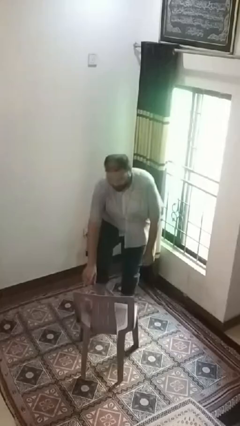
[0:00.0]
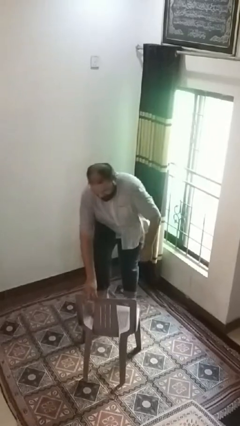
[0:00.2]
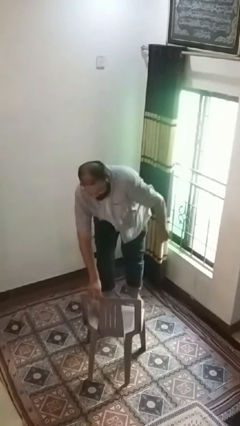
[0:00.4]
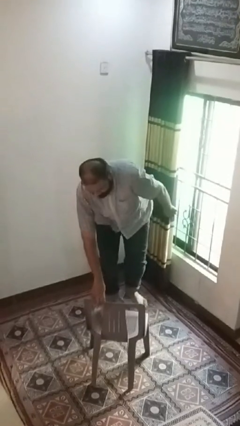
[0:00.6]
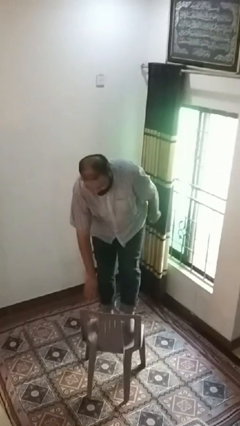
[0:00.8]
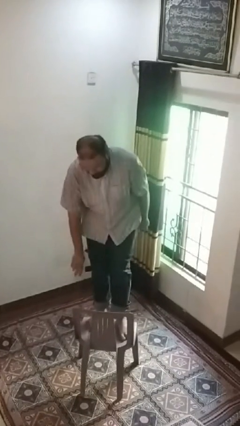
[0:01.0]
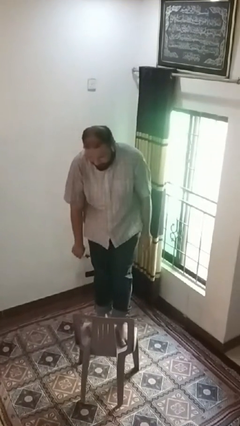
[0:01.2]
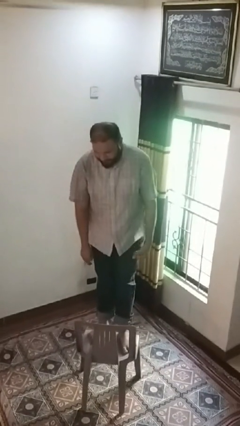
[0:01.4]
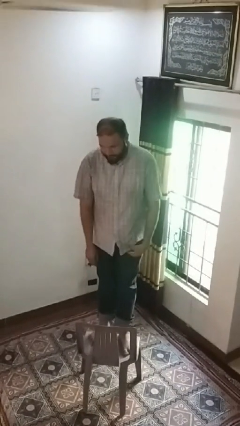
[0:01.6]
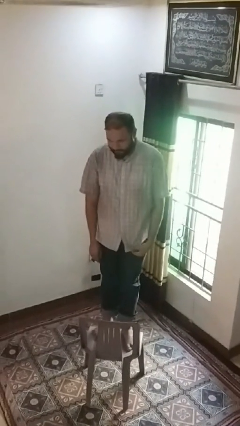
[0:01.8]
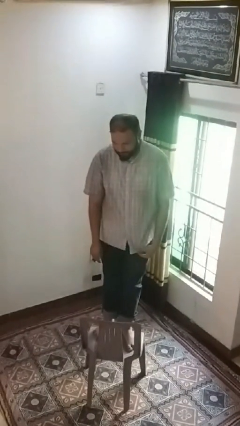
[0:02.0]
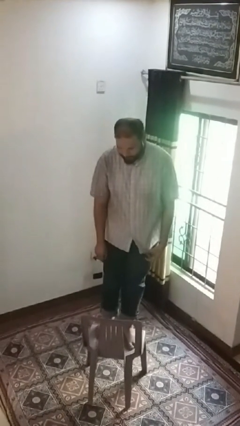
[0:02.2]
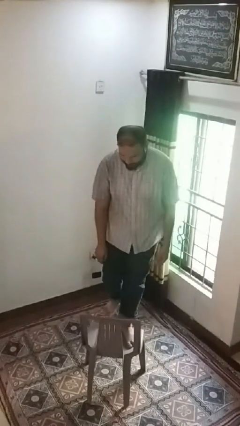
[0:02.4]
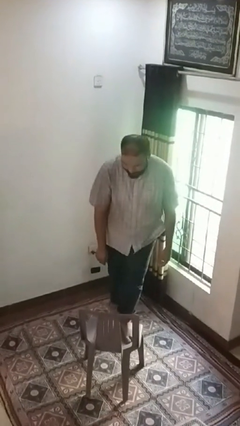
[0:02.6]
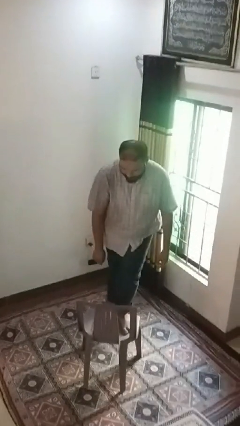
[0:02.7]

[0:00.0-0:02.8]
person climbs on chair

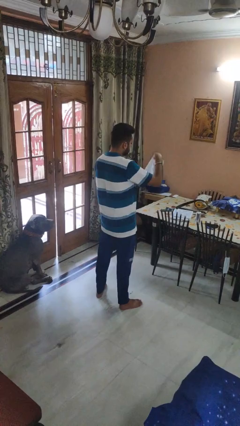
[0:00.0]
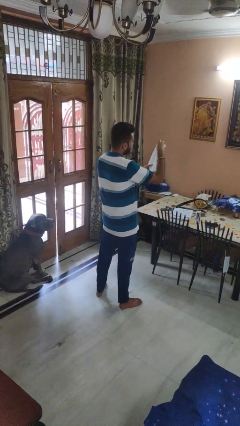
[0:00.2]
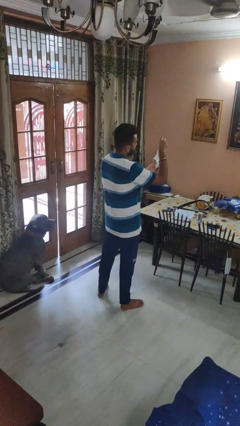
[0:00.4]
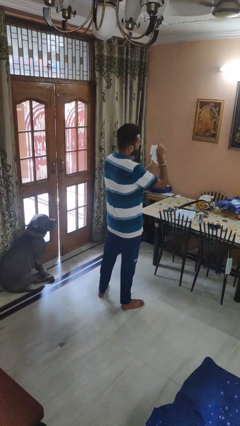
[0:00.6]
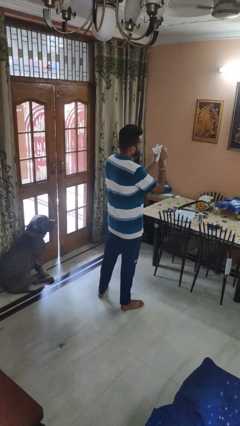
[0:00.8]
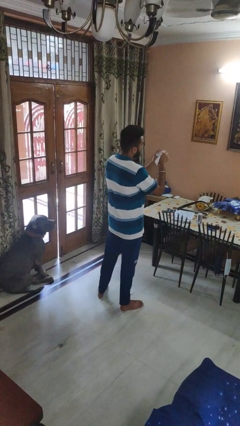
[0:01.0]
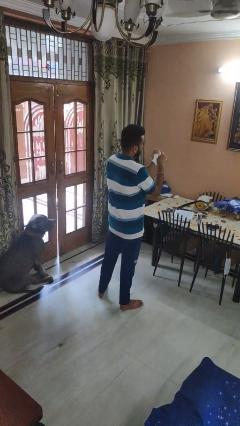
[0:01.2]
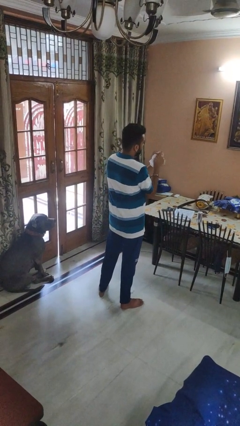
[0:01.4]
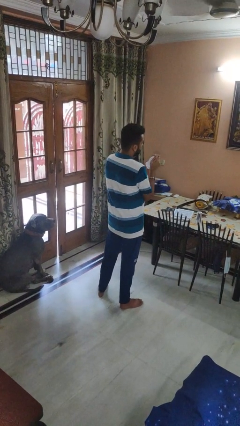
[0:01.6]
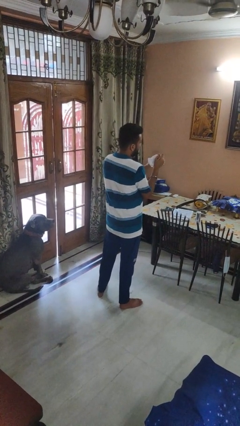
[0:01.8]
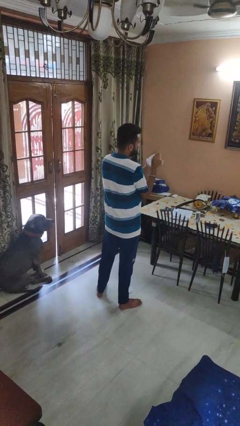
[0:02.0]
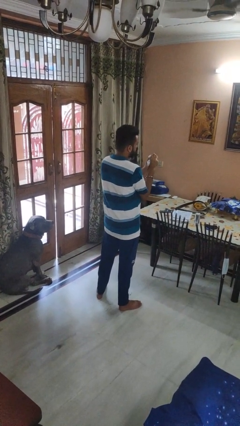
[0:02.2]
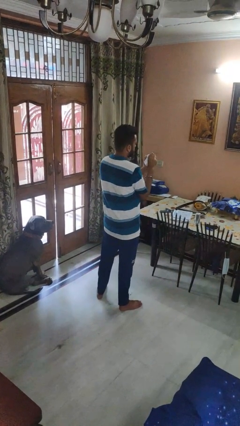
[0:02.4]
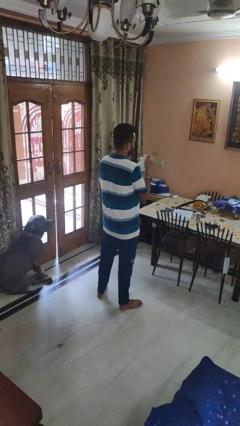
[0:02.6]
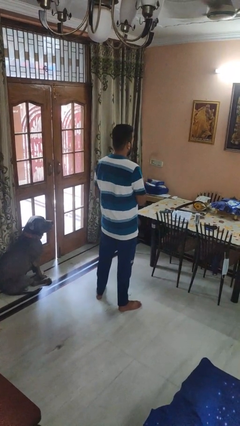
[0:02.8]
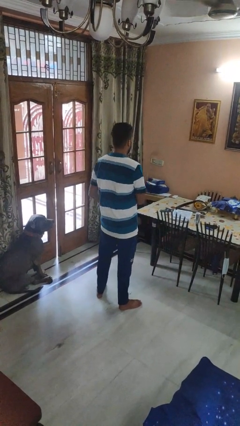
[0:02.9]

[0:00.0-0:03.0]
person crumples paper

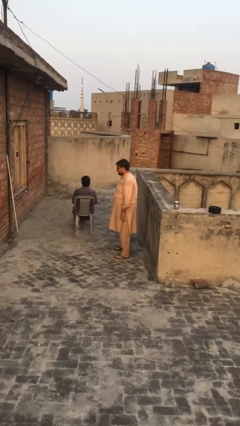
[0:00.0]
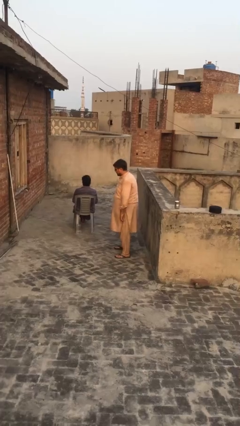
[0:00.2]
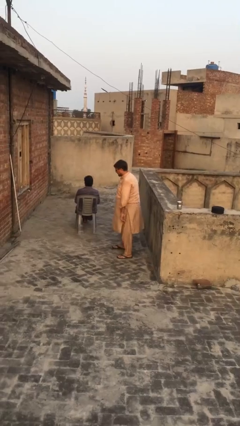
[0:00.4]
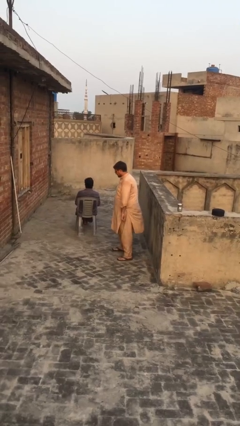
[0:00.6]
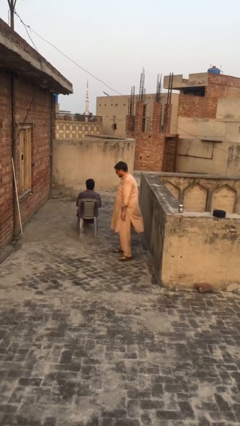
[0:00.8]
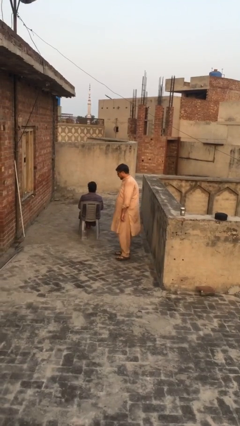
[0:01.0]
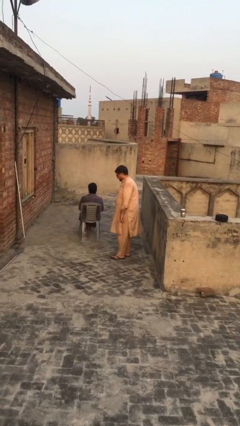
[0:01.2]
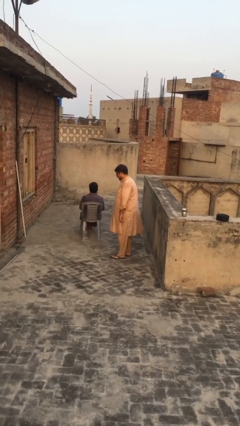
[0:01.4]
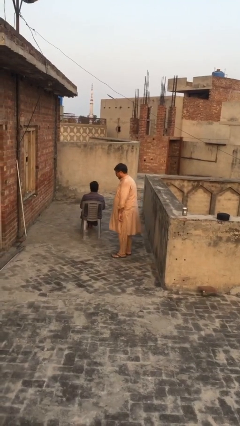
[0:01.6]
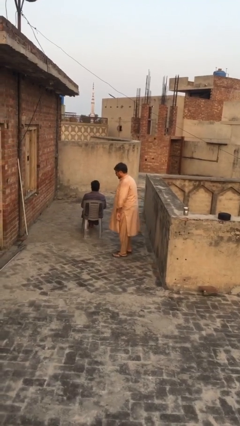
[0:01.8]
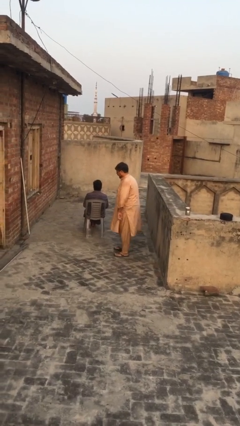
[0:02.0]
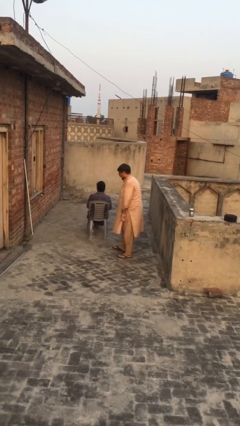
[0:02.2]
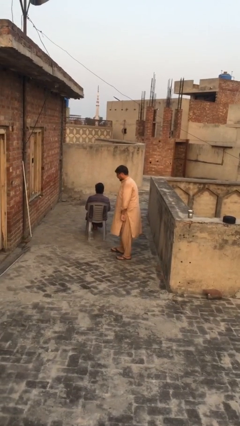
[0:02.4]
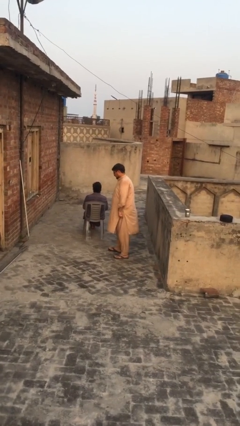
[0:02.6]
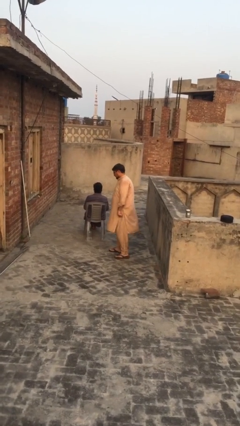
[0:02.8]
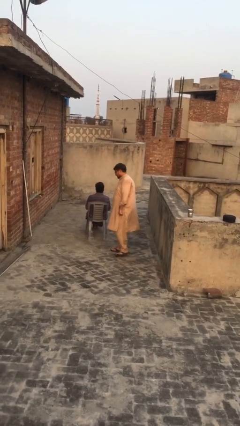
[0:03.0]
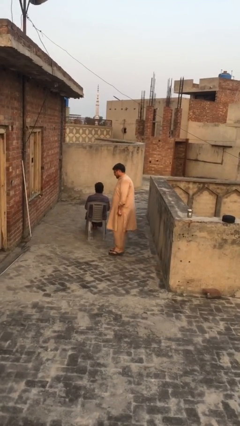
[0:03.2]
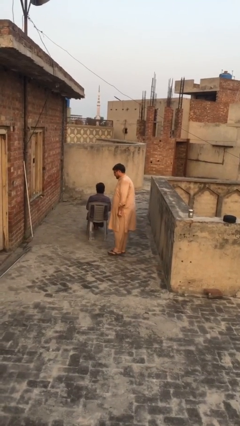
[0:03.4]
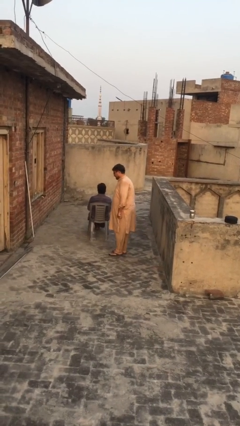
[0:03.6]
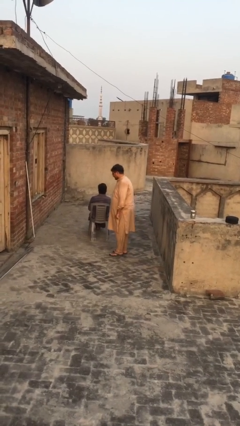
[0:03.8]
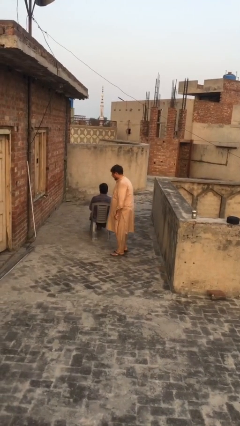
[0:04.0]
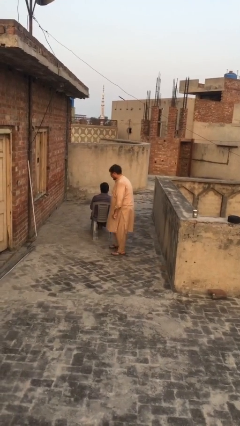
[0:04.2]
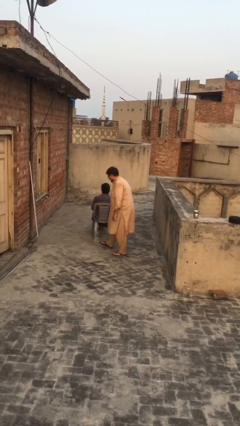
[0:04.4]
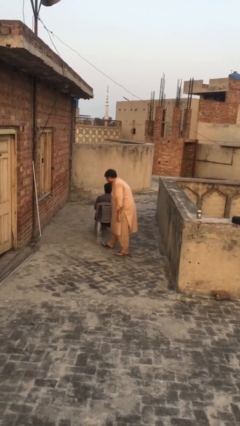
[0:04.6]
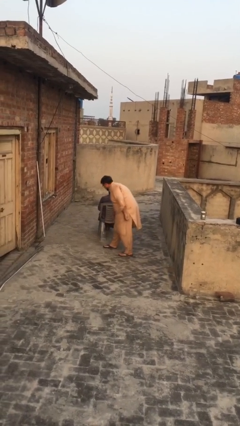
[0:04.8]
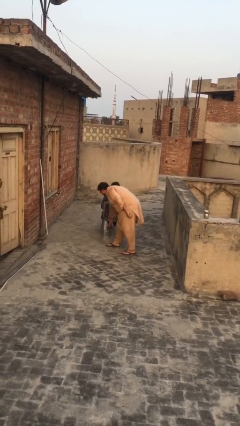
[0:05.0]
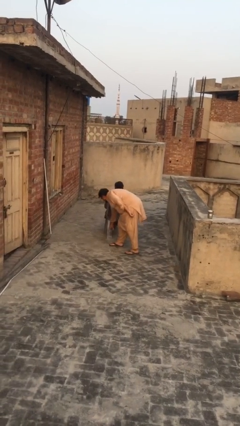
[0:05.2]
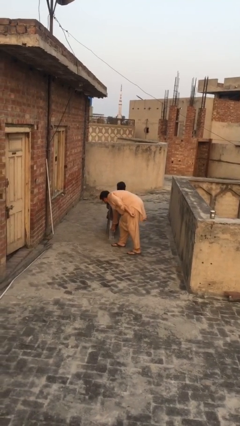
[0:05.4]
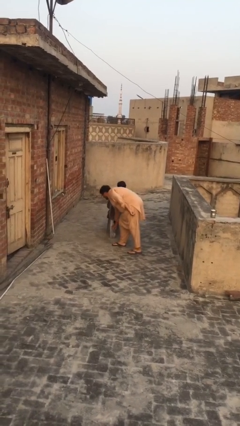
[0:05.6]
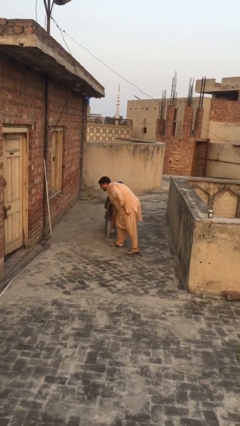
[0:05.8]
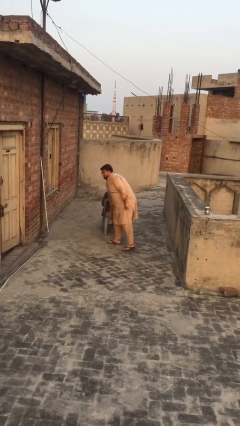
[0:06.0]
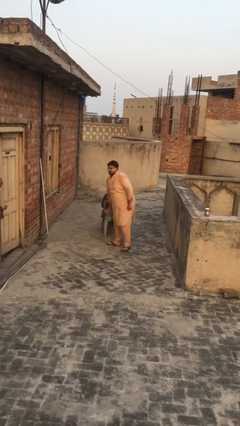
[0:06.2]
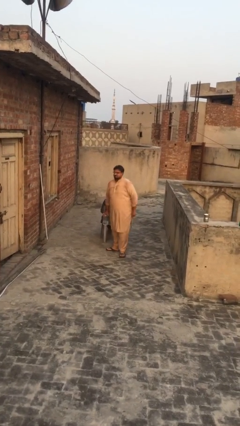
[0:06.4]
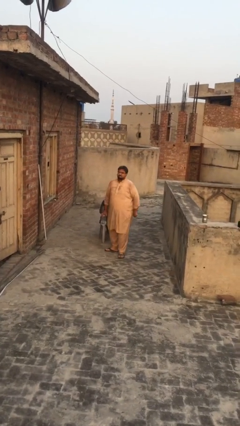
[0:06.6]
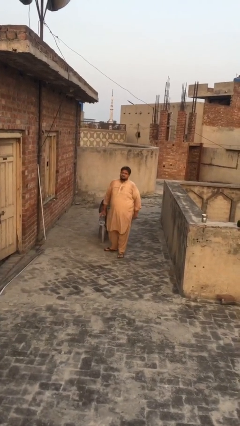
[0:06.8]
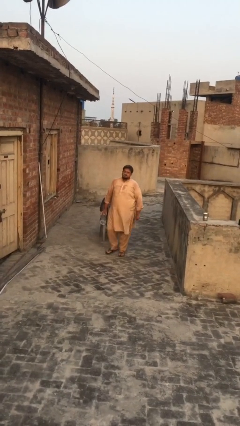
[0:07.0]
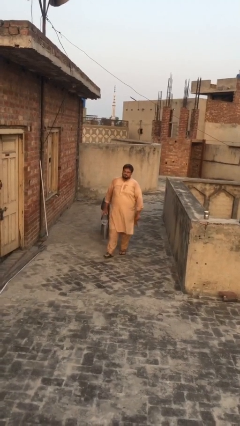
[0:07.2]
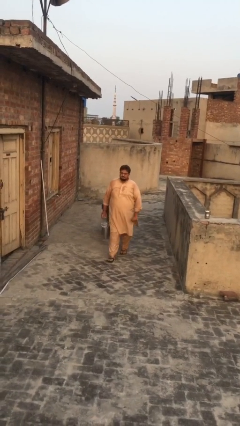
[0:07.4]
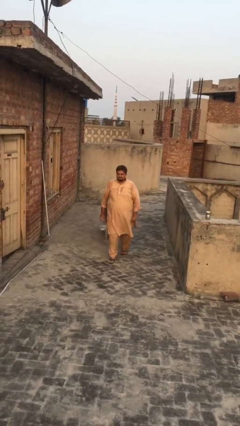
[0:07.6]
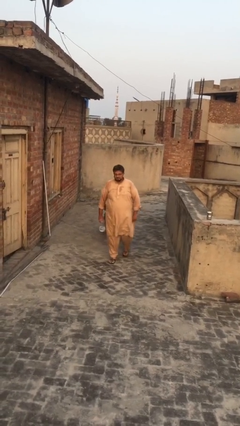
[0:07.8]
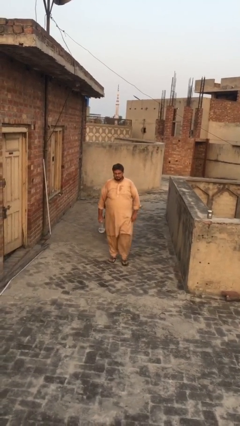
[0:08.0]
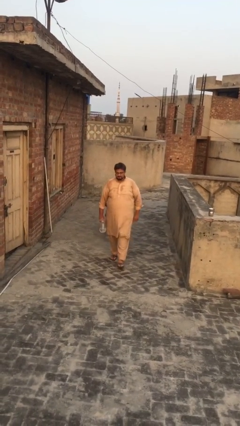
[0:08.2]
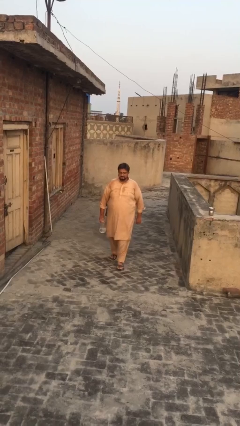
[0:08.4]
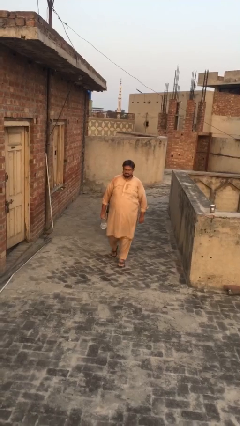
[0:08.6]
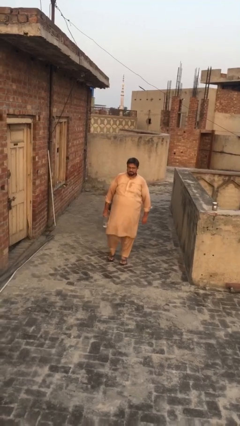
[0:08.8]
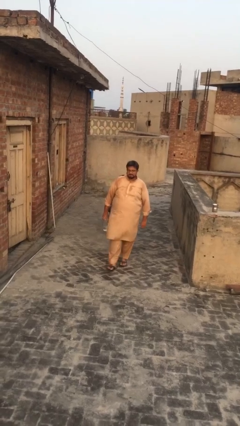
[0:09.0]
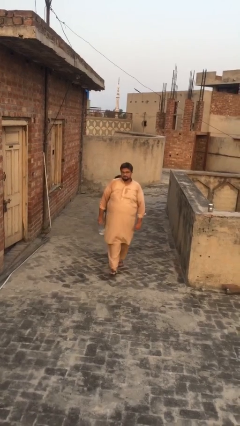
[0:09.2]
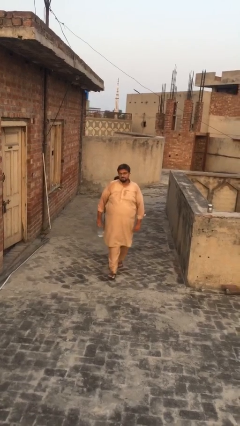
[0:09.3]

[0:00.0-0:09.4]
person steals object from person

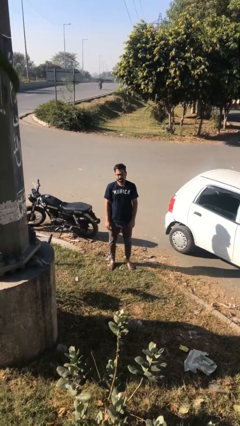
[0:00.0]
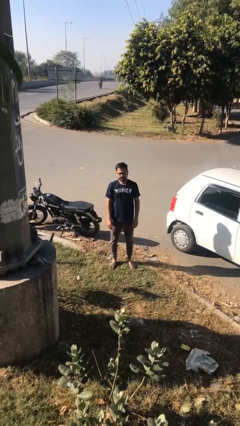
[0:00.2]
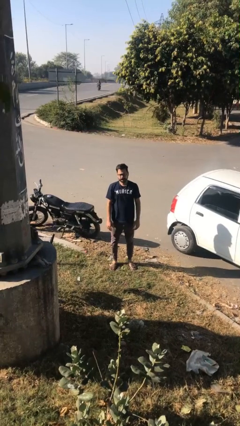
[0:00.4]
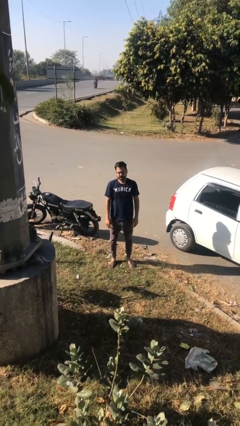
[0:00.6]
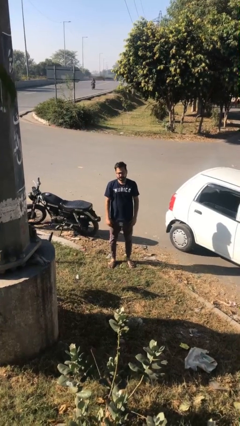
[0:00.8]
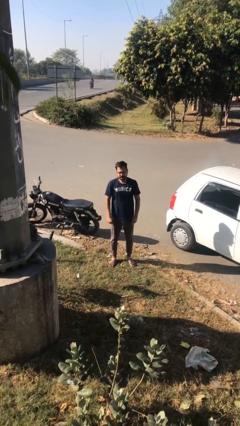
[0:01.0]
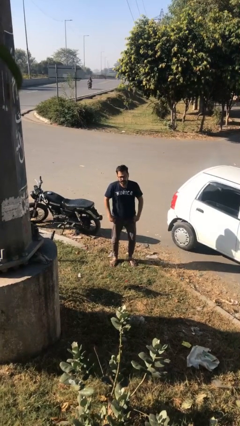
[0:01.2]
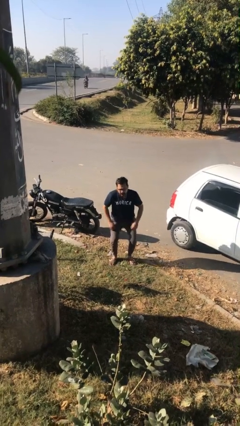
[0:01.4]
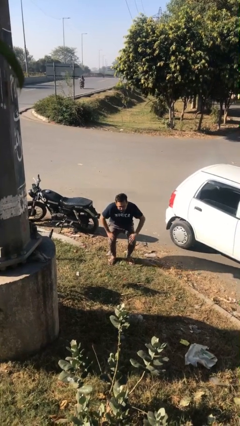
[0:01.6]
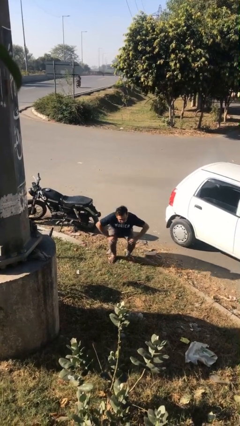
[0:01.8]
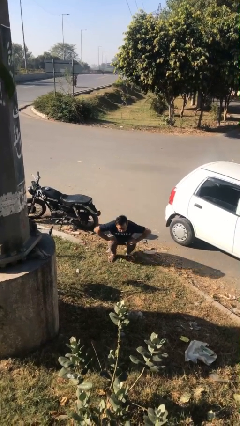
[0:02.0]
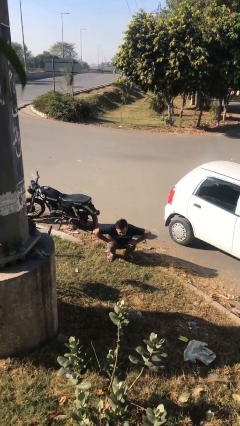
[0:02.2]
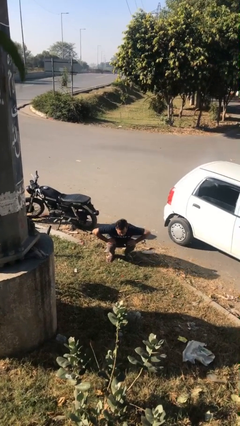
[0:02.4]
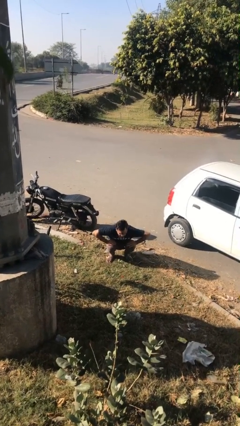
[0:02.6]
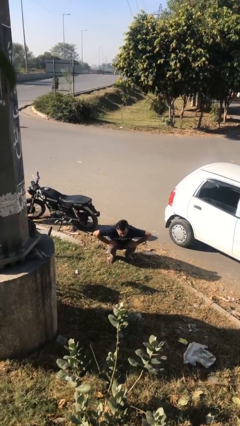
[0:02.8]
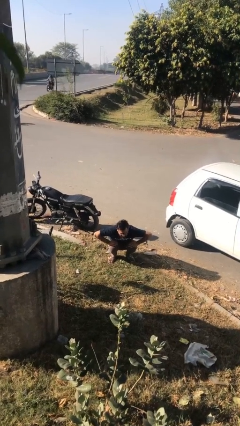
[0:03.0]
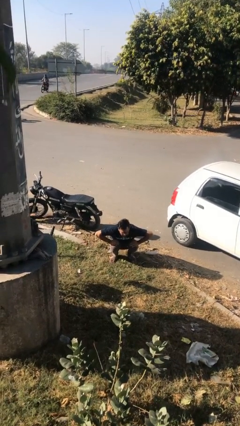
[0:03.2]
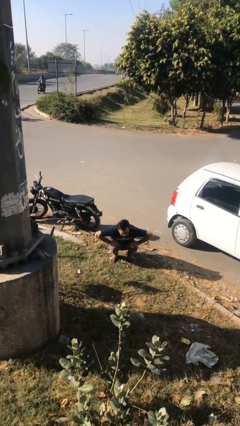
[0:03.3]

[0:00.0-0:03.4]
person sits down
